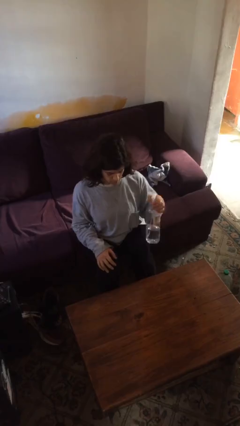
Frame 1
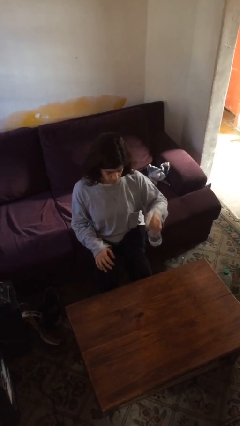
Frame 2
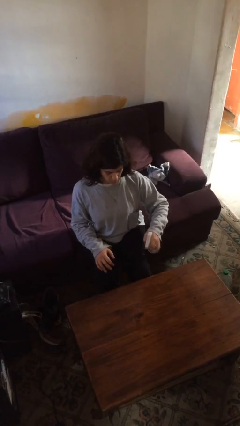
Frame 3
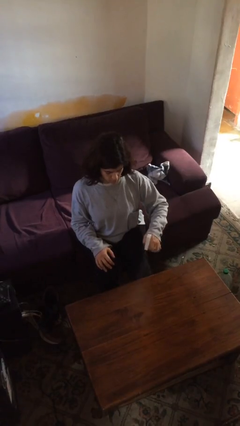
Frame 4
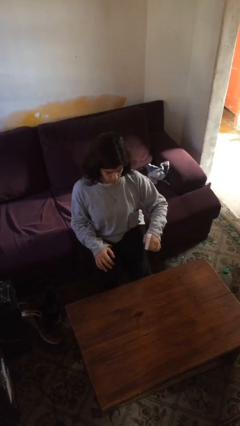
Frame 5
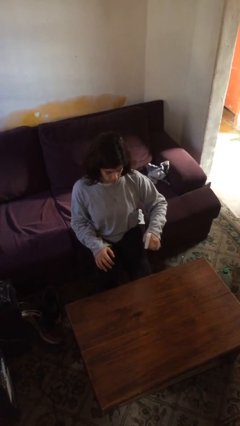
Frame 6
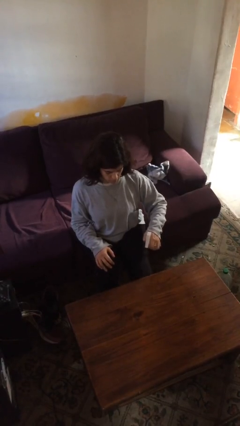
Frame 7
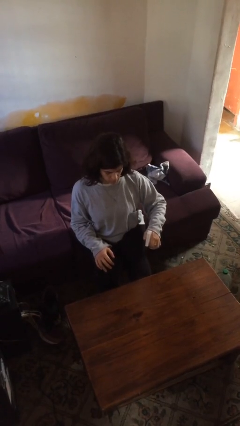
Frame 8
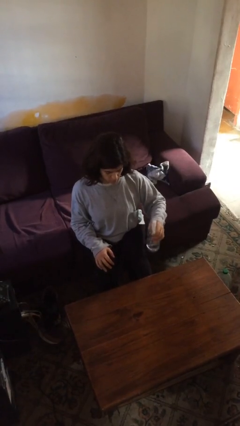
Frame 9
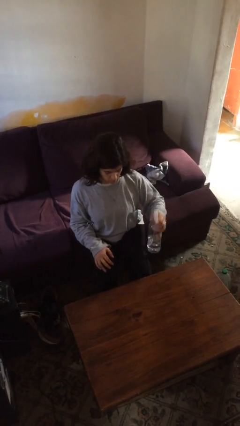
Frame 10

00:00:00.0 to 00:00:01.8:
person sprays from bottle

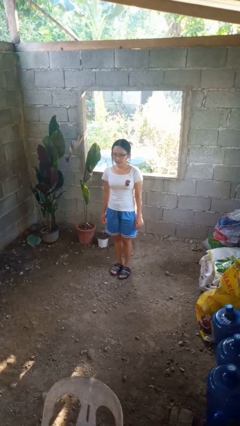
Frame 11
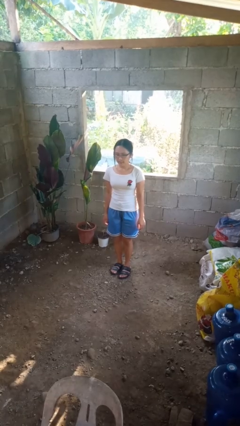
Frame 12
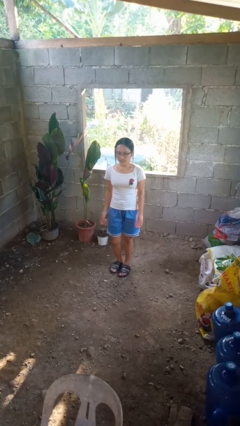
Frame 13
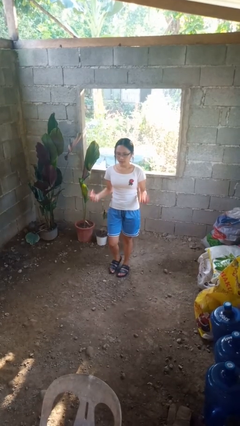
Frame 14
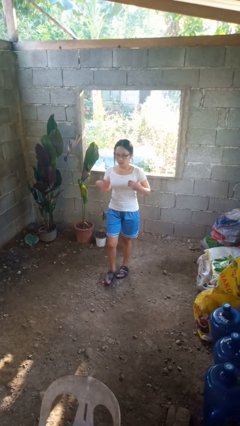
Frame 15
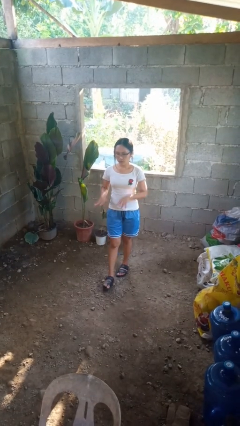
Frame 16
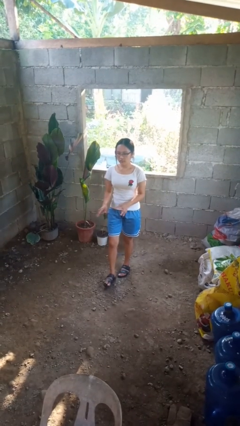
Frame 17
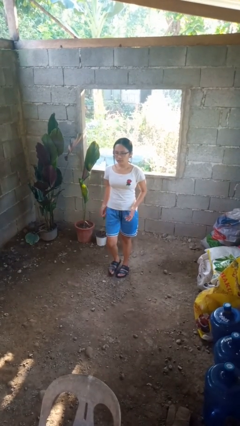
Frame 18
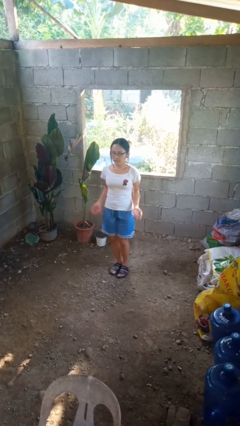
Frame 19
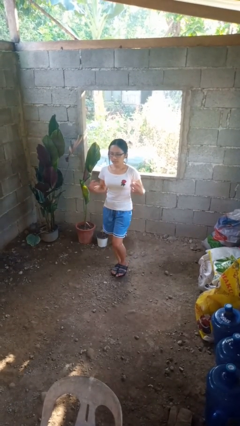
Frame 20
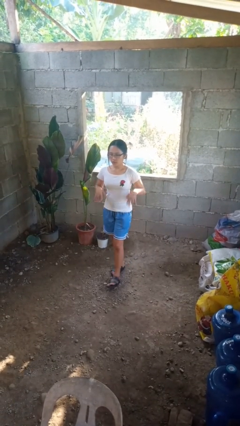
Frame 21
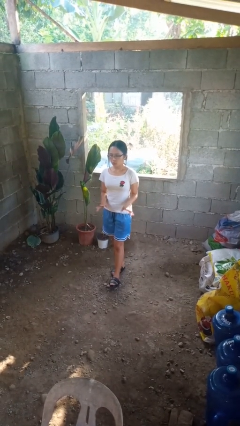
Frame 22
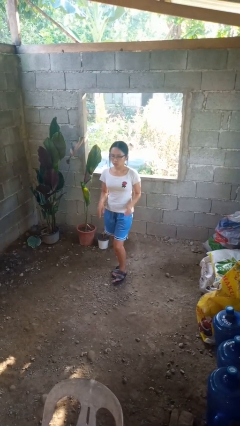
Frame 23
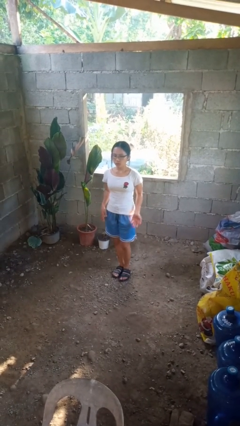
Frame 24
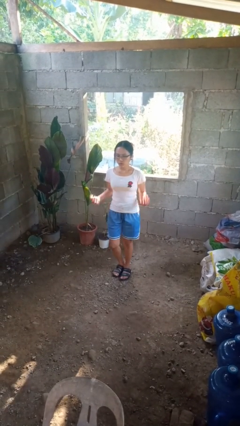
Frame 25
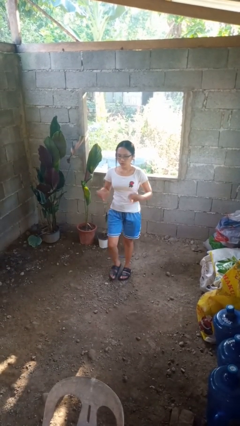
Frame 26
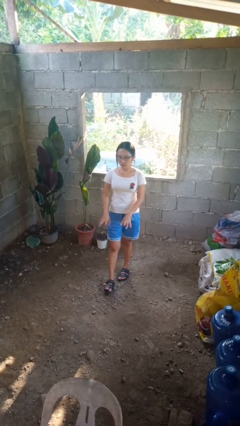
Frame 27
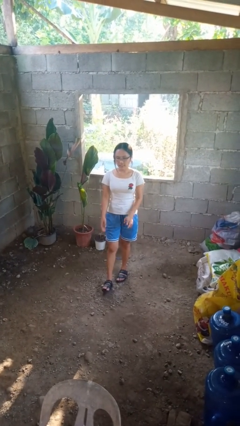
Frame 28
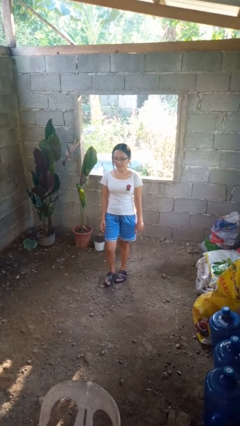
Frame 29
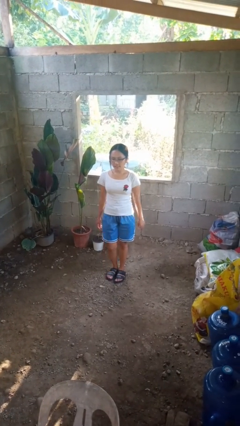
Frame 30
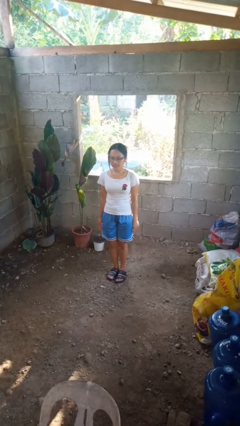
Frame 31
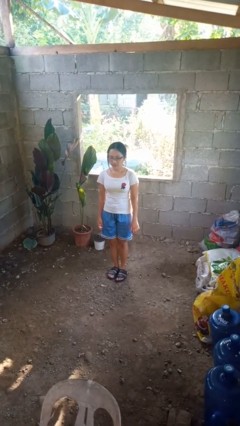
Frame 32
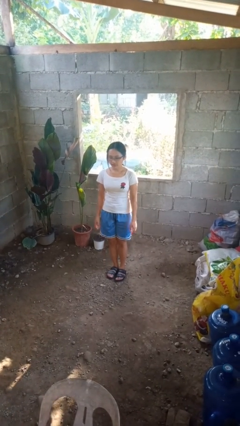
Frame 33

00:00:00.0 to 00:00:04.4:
person dances in place

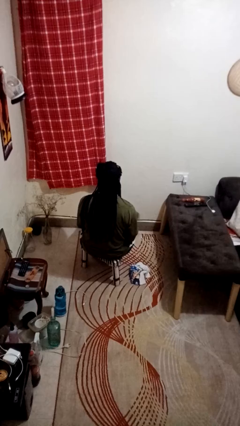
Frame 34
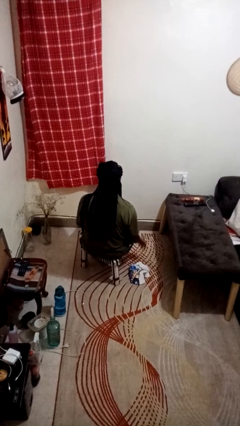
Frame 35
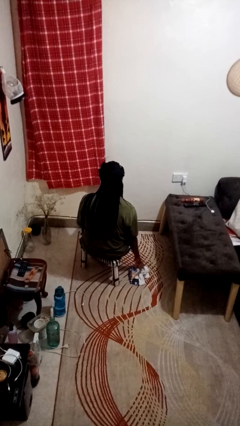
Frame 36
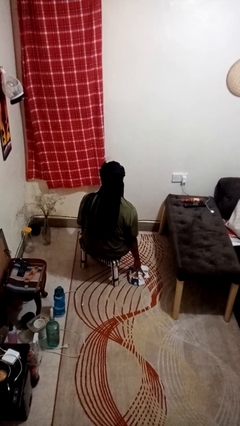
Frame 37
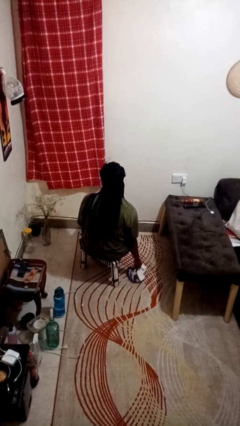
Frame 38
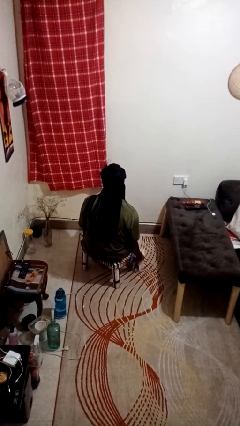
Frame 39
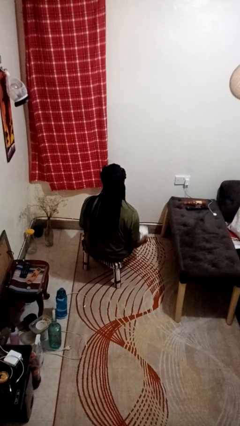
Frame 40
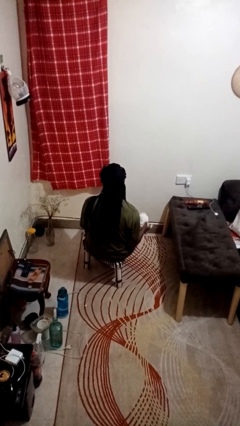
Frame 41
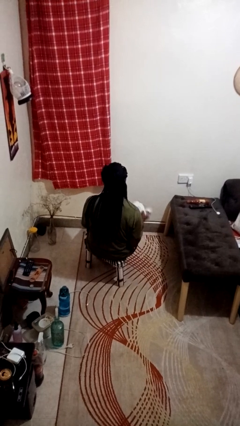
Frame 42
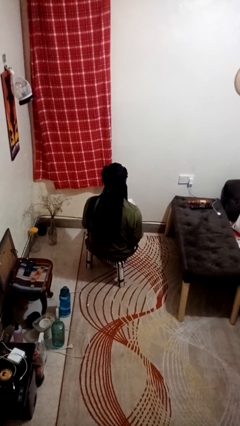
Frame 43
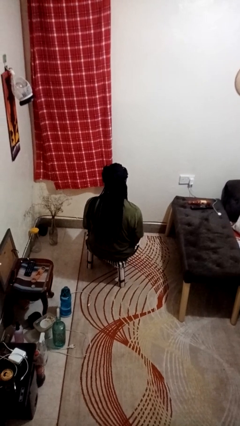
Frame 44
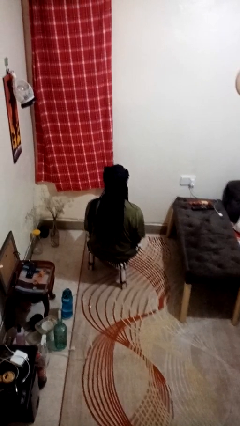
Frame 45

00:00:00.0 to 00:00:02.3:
person picks up object from floor

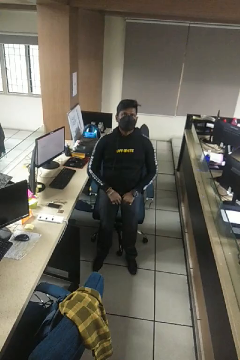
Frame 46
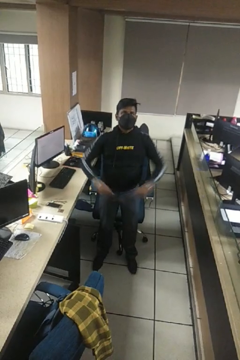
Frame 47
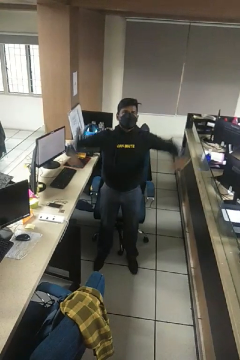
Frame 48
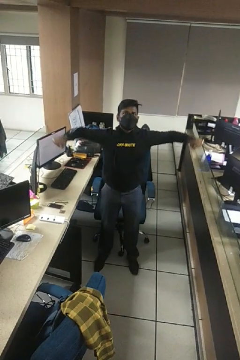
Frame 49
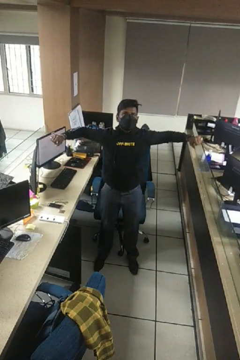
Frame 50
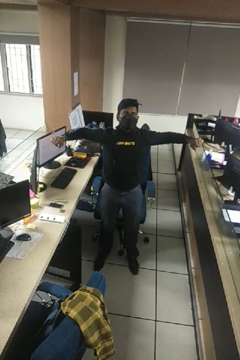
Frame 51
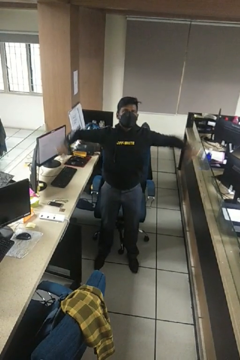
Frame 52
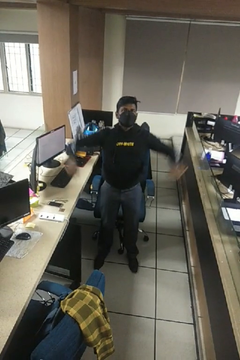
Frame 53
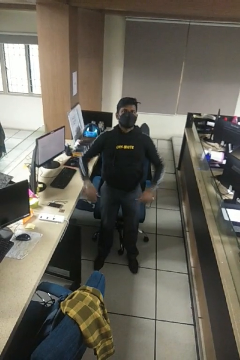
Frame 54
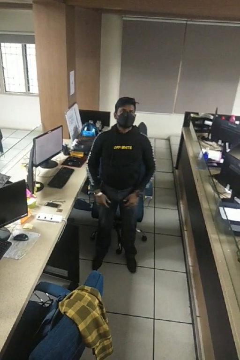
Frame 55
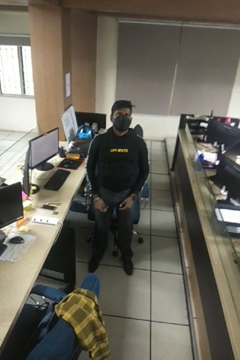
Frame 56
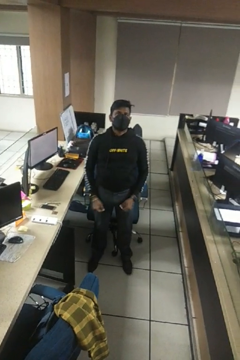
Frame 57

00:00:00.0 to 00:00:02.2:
person stretches arms to side

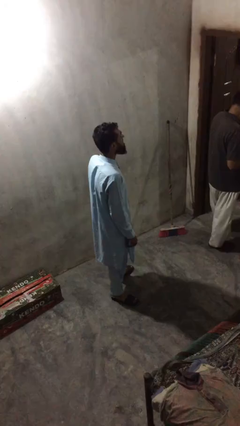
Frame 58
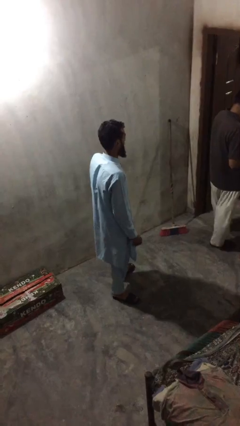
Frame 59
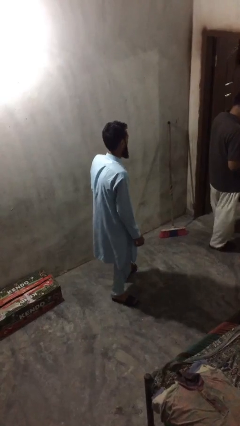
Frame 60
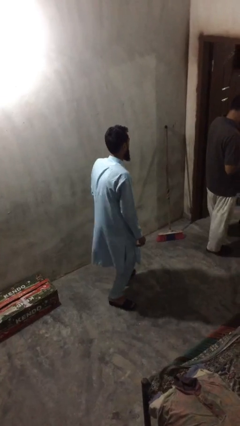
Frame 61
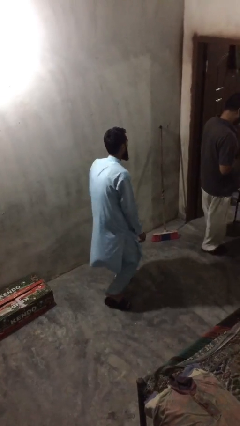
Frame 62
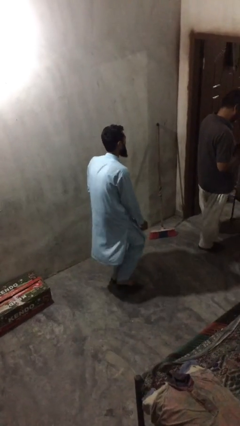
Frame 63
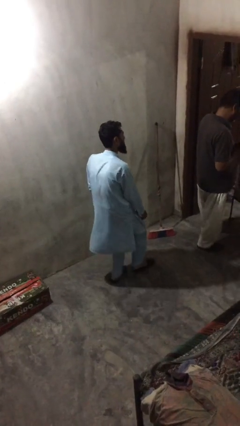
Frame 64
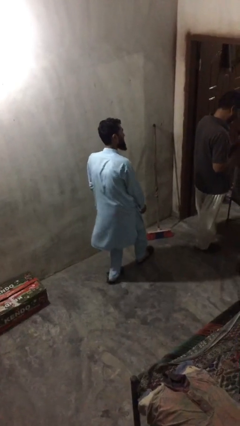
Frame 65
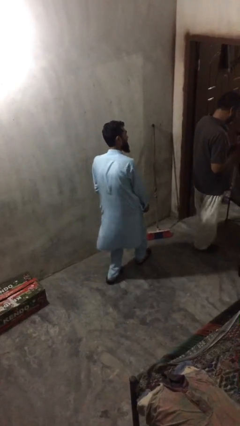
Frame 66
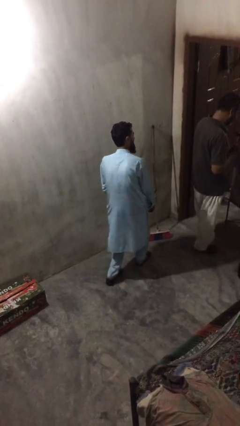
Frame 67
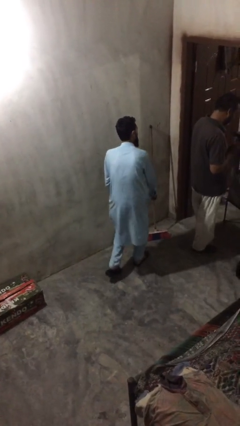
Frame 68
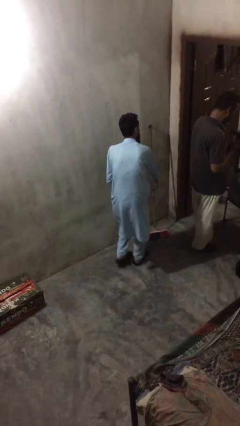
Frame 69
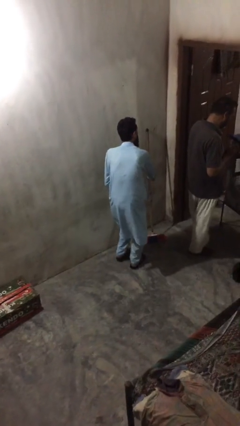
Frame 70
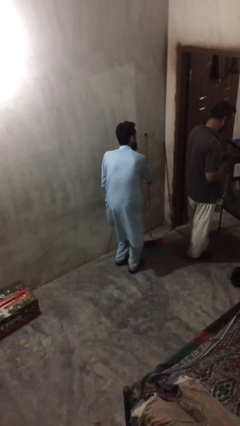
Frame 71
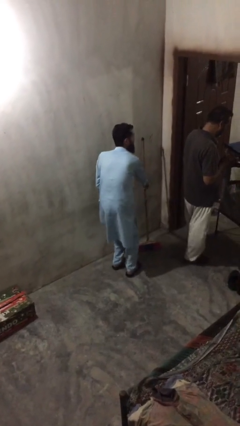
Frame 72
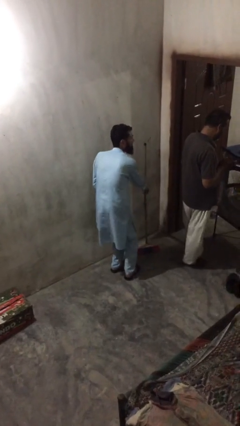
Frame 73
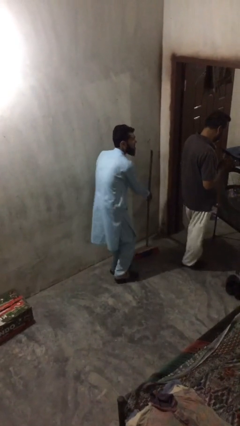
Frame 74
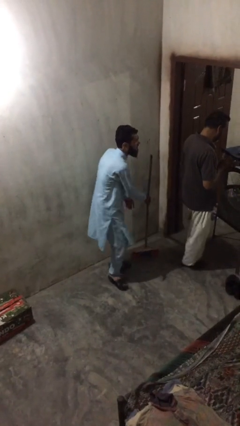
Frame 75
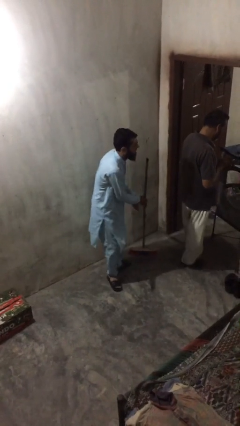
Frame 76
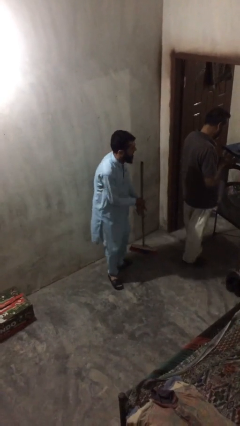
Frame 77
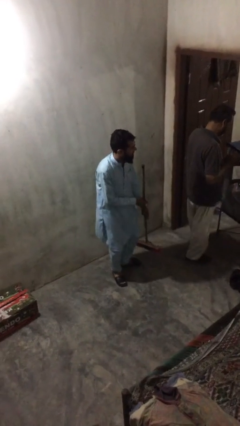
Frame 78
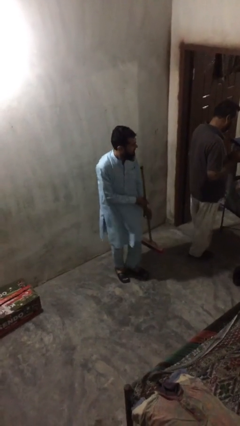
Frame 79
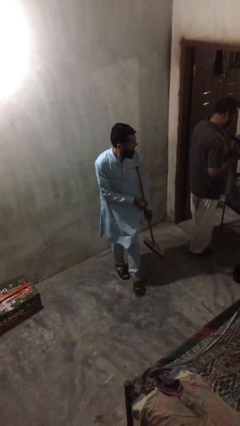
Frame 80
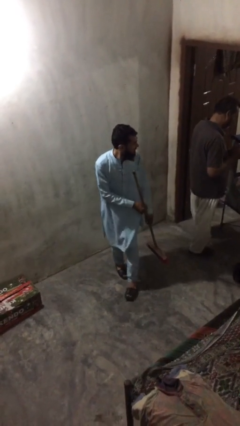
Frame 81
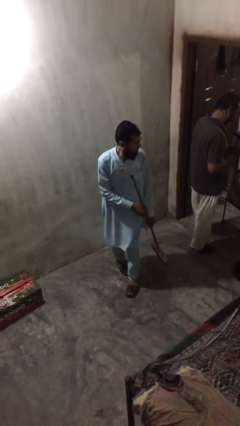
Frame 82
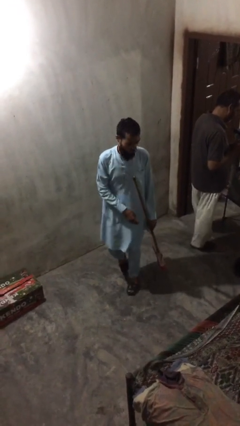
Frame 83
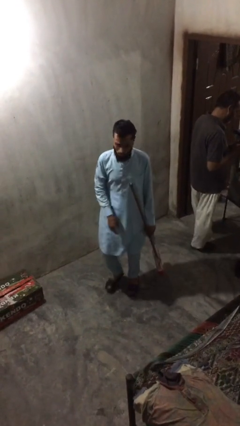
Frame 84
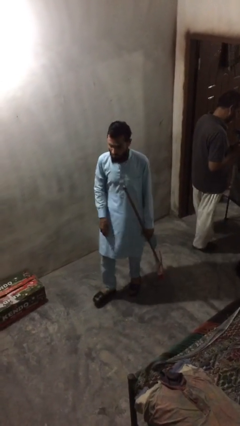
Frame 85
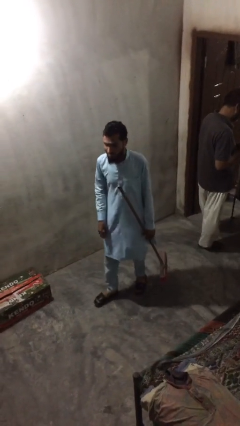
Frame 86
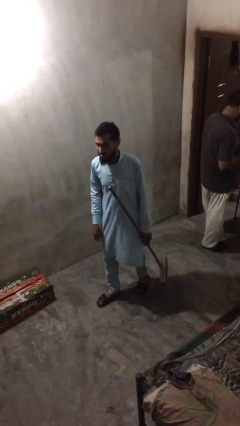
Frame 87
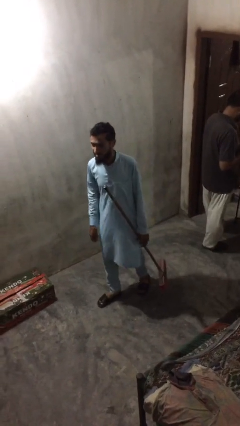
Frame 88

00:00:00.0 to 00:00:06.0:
person steals object from person

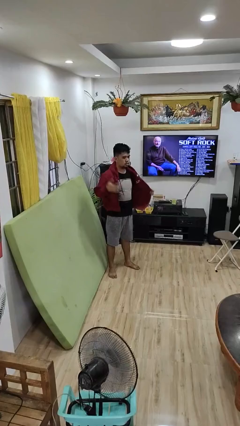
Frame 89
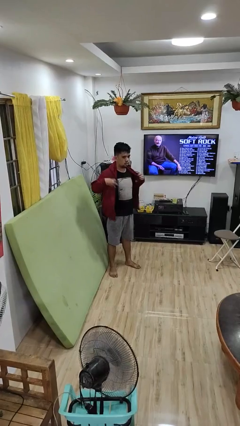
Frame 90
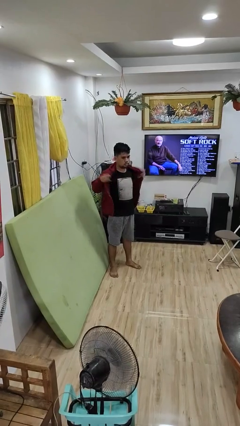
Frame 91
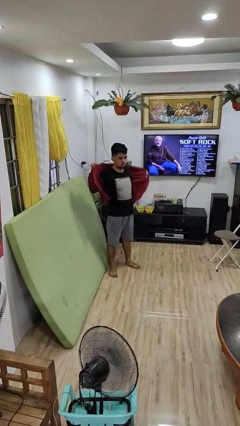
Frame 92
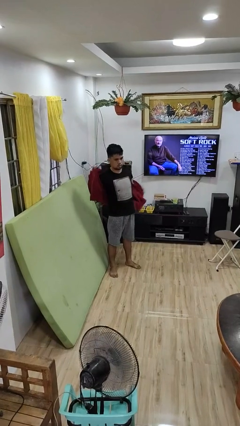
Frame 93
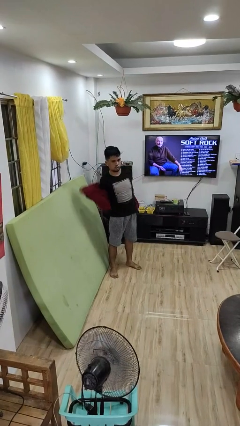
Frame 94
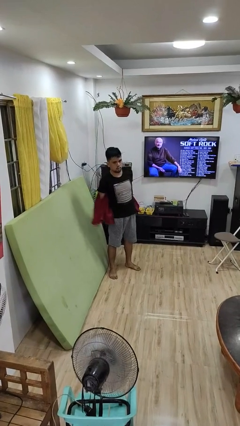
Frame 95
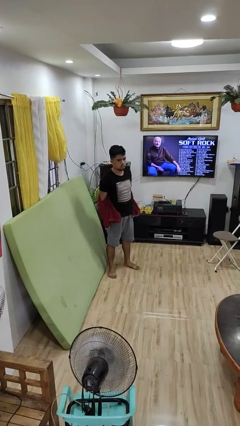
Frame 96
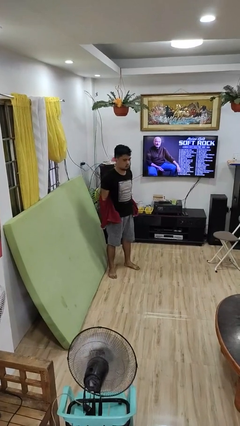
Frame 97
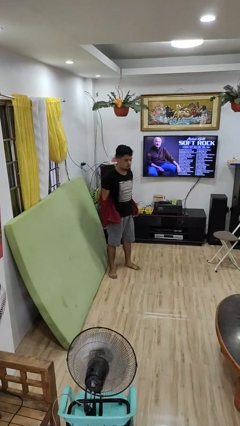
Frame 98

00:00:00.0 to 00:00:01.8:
person takes off jacket
